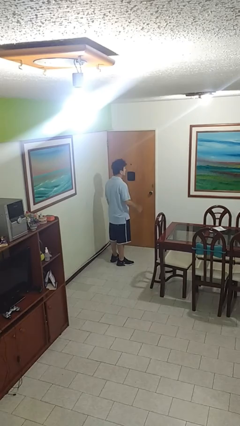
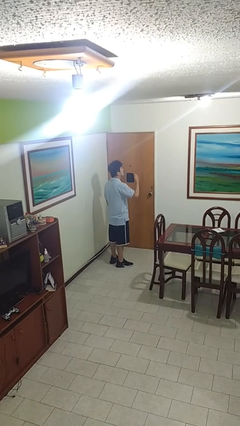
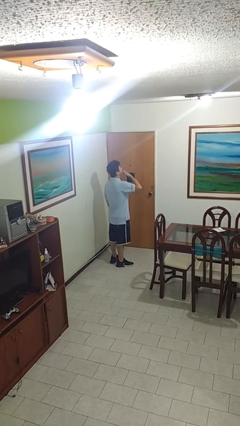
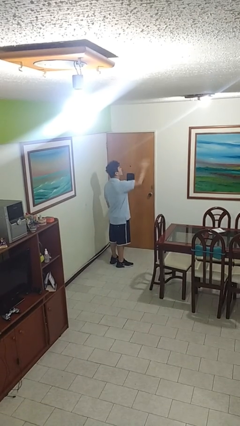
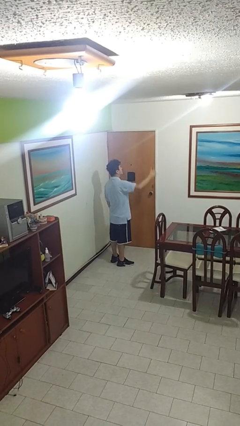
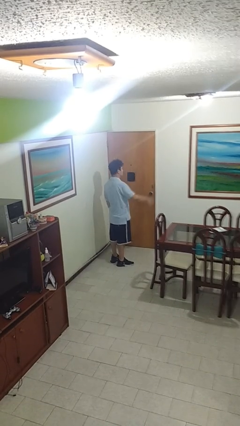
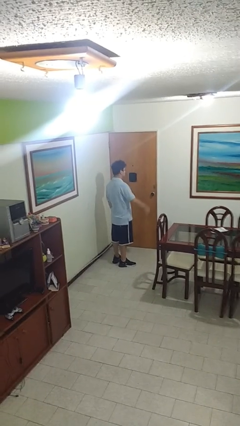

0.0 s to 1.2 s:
person gestures blow kiss

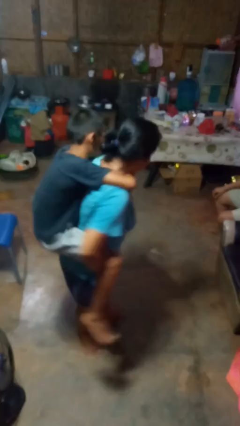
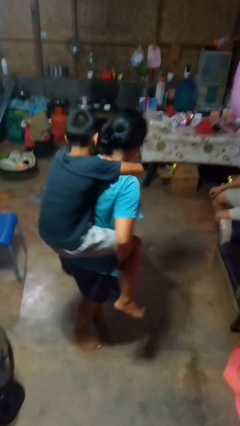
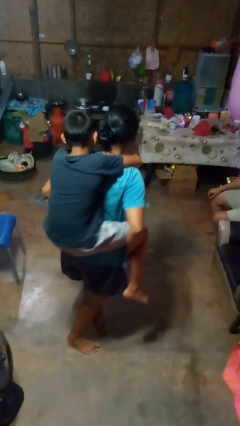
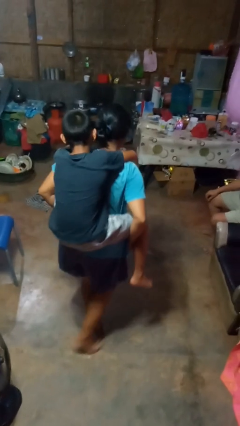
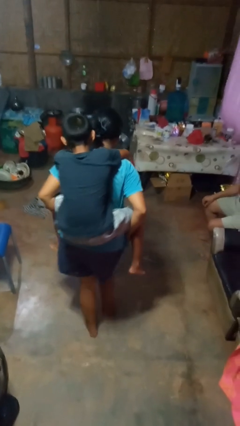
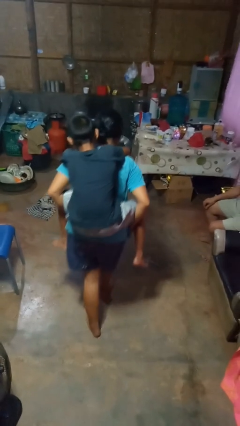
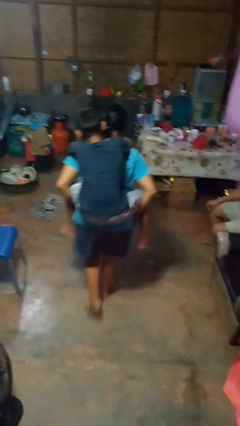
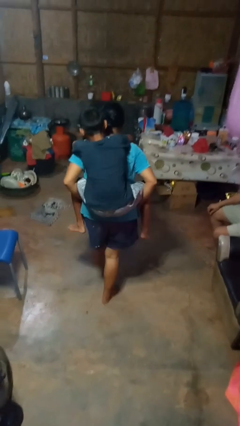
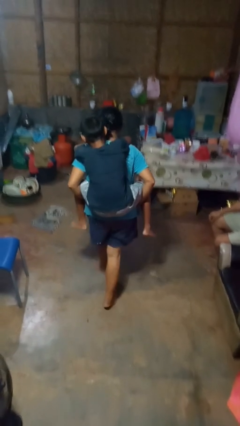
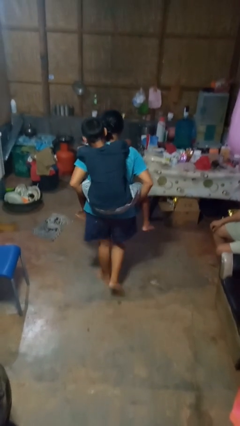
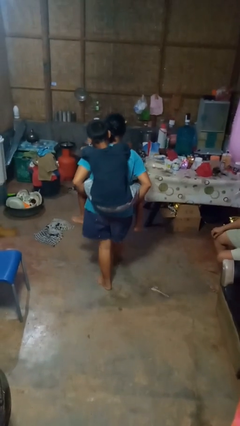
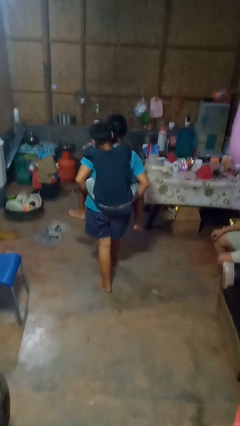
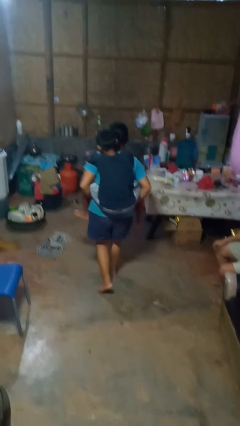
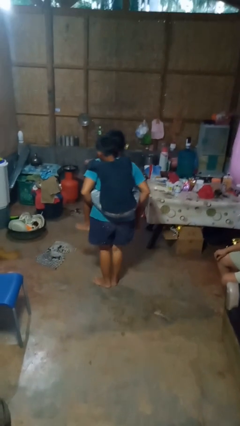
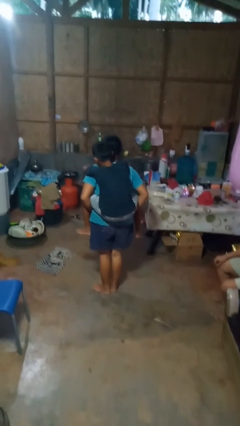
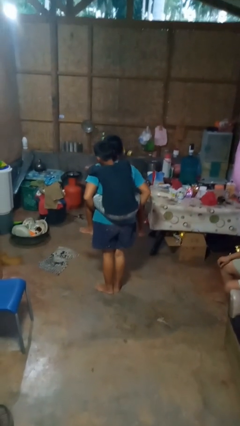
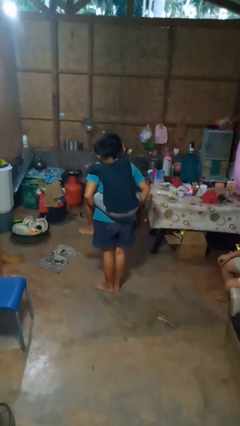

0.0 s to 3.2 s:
person carries person on back

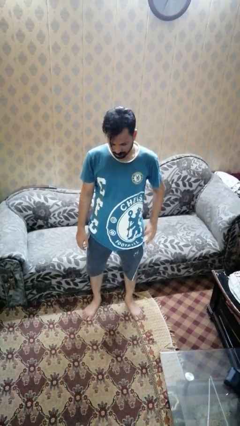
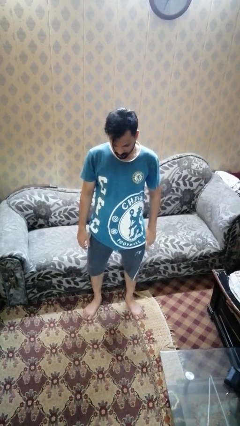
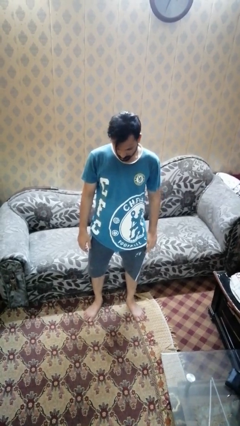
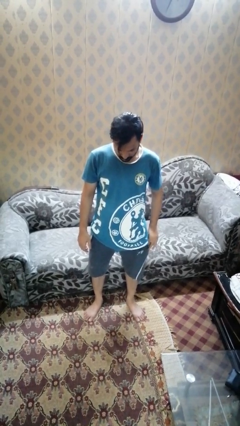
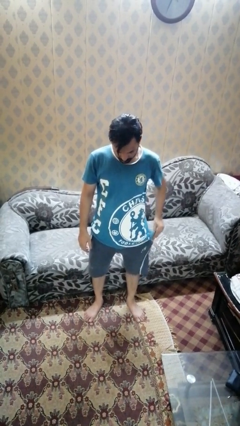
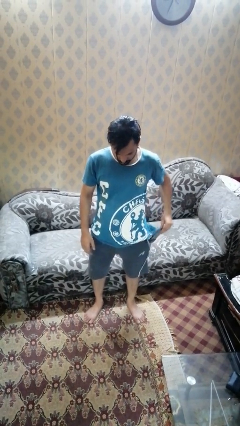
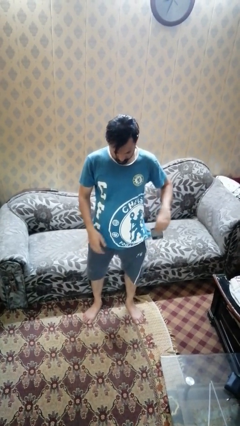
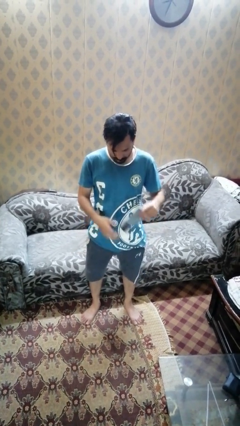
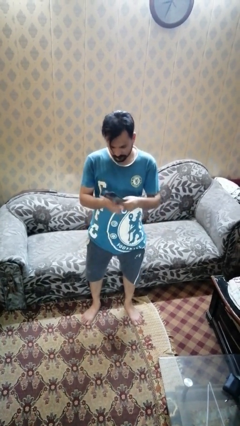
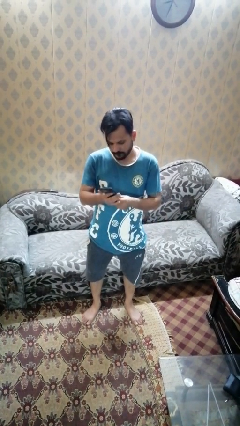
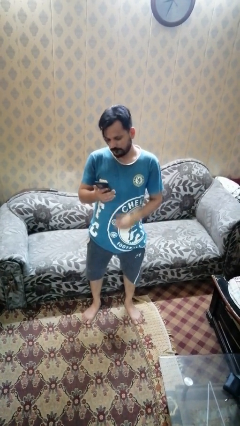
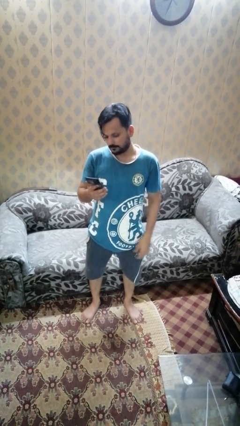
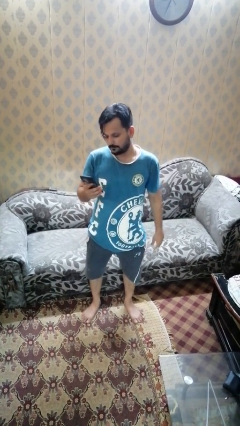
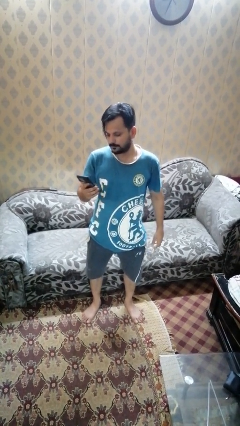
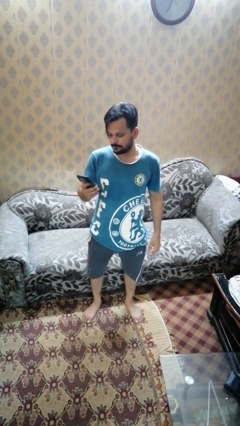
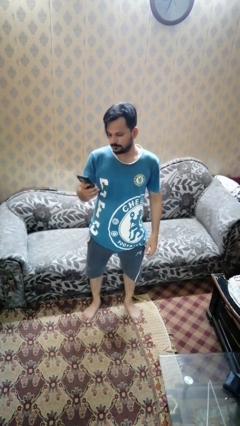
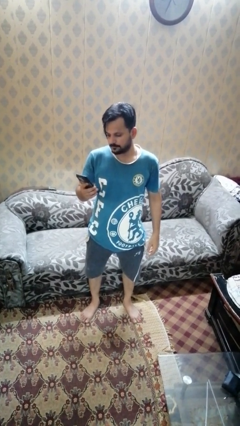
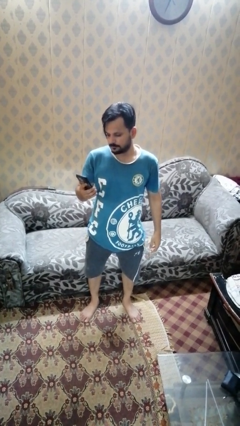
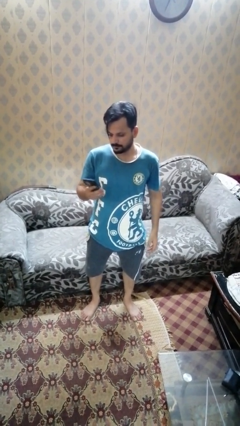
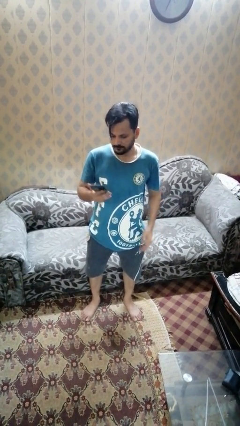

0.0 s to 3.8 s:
person takes phone from pocket

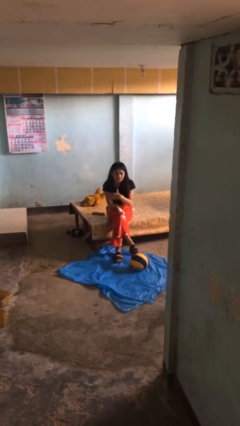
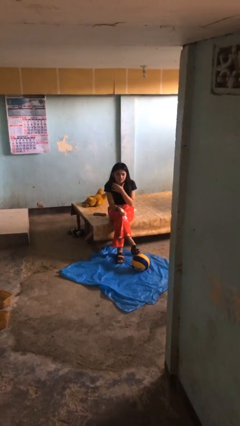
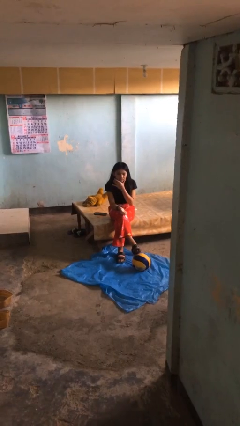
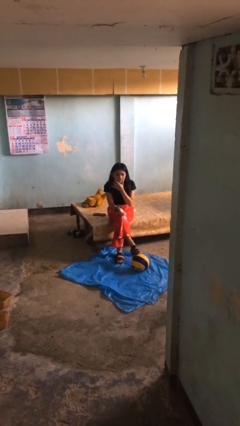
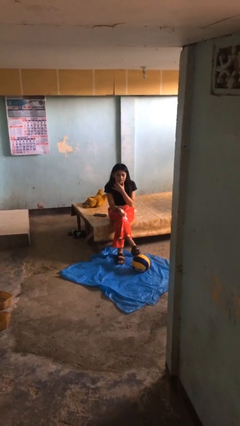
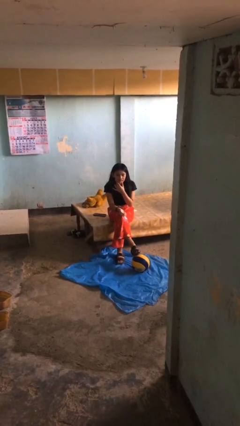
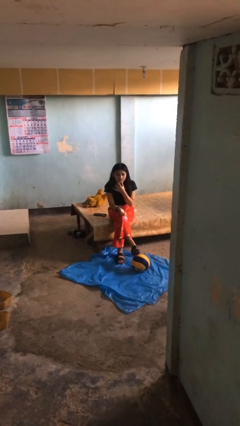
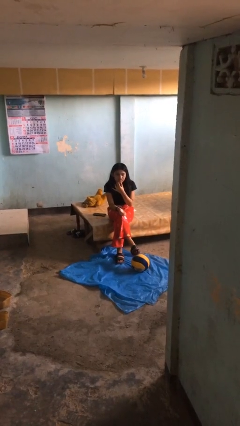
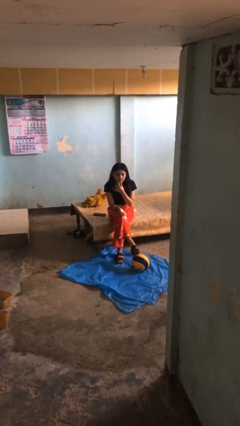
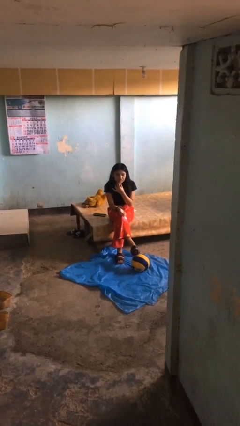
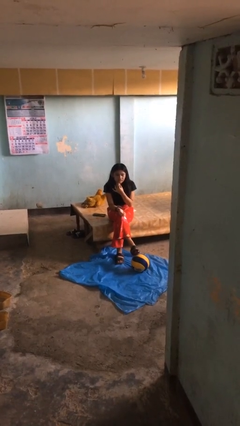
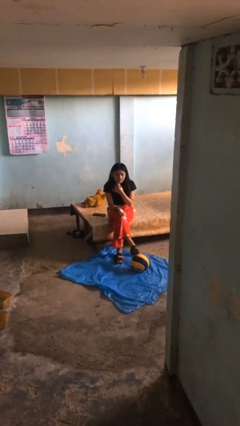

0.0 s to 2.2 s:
person strokes chin

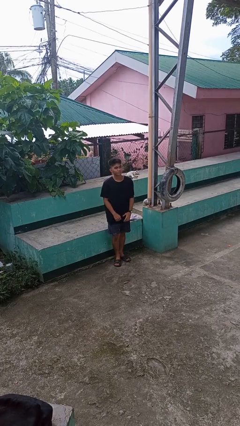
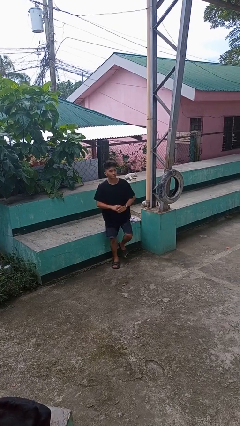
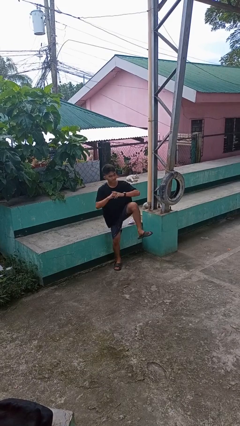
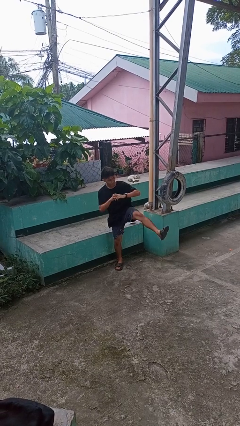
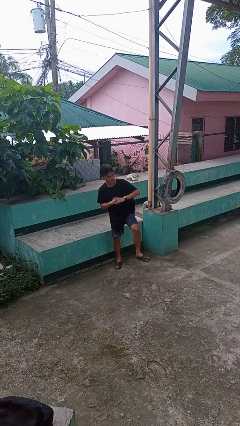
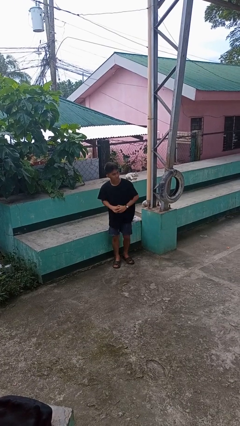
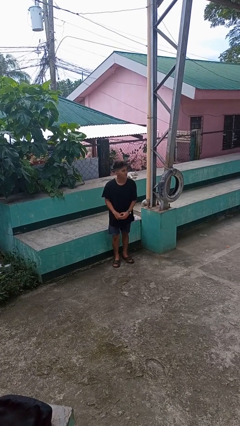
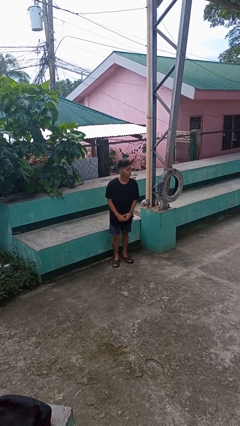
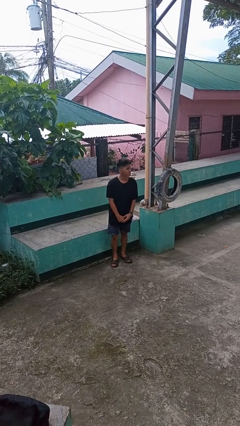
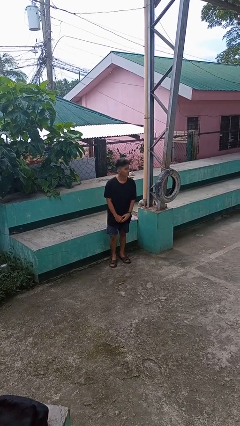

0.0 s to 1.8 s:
person karate kicks

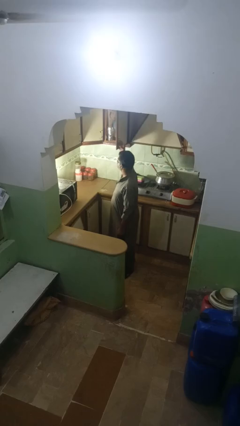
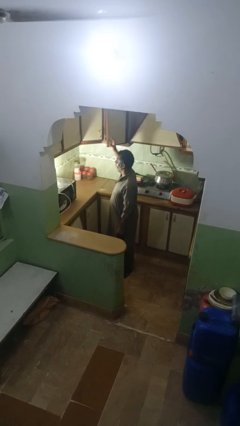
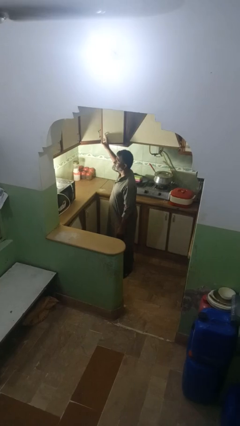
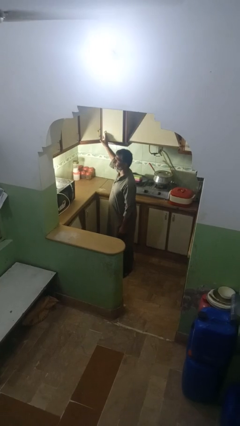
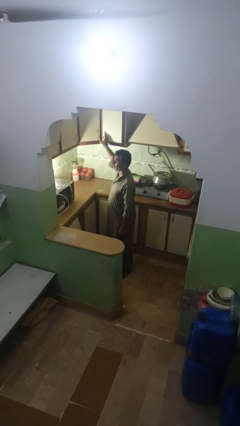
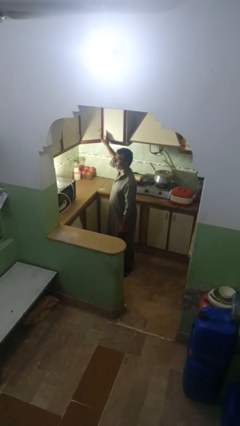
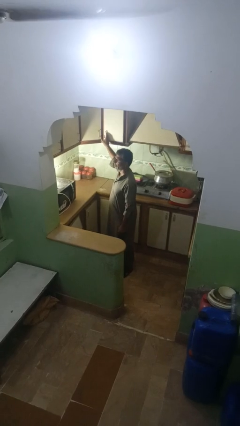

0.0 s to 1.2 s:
person closes kitchen drawer

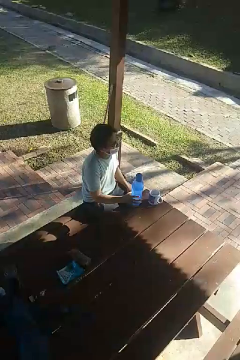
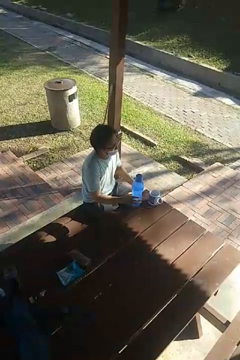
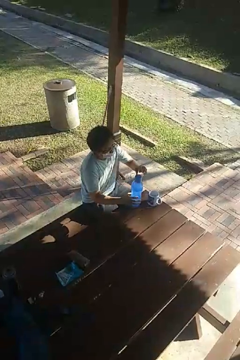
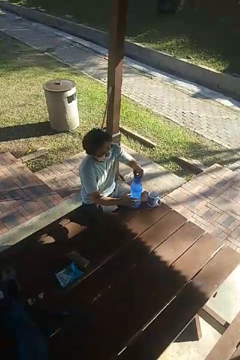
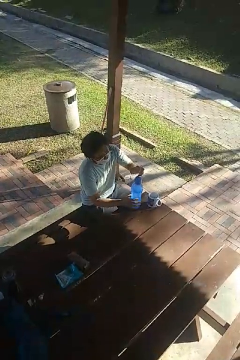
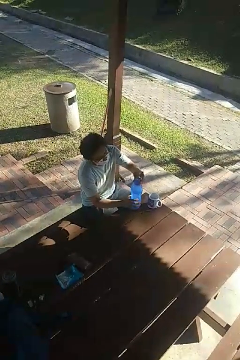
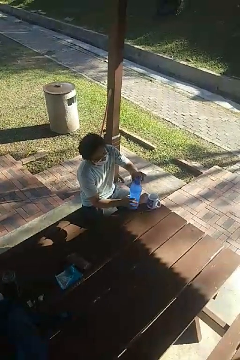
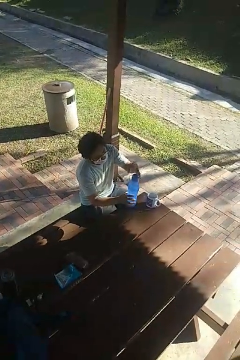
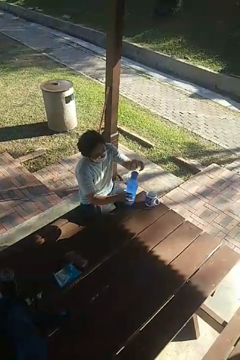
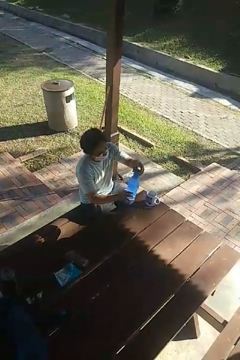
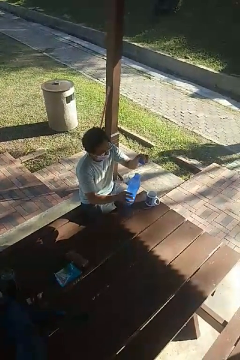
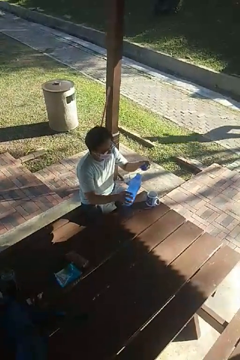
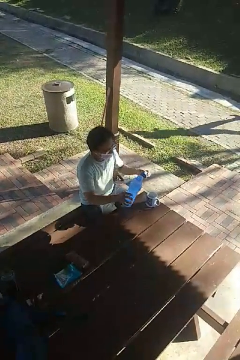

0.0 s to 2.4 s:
person unscrews lid from bottle

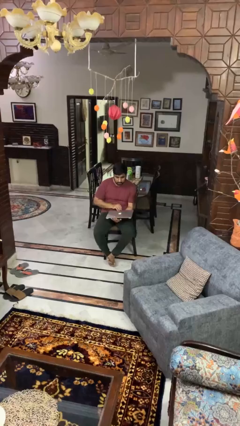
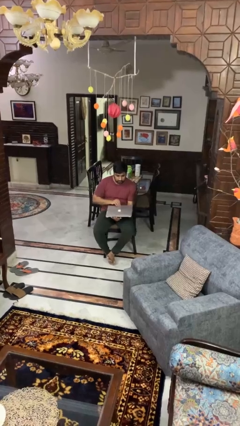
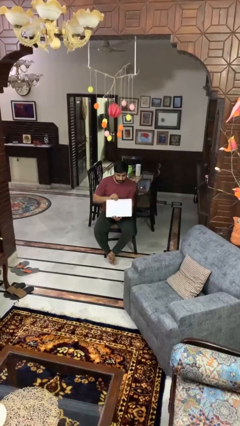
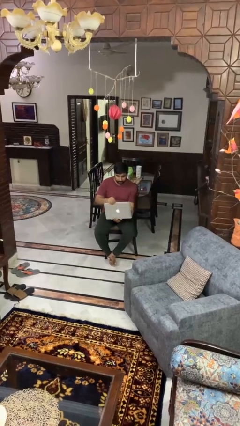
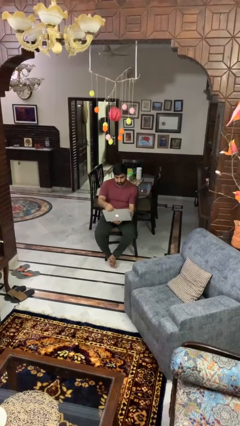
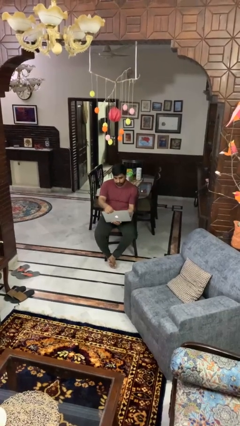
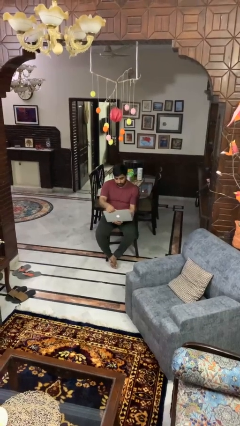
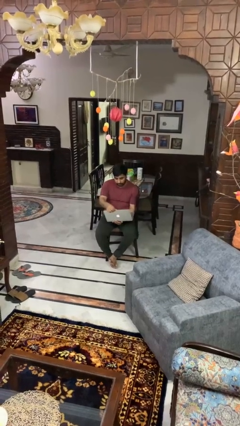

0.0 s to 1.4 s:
person opens laptop

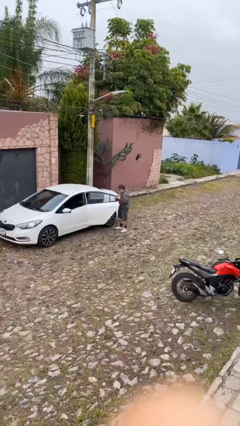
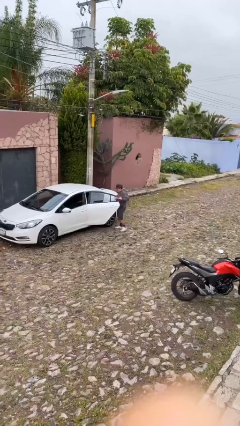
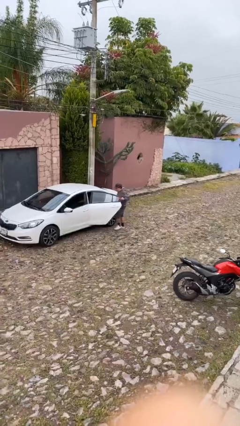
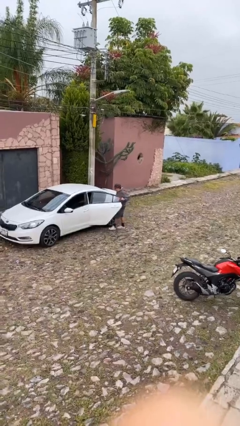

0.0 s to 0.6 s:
person opens car door
